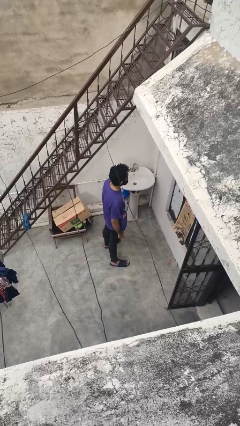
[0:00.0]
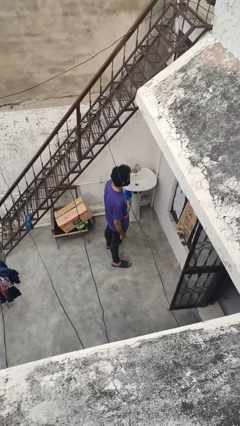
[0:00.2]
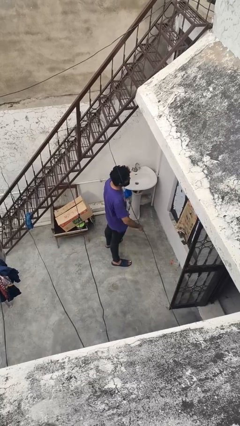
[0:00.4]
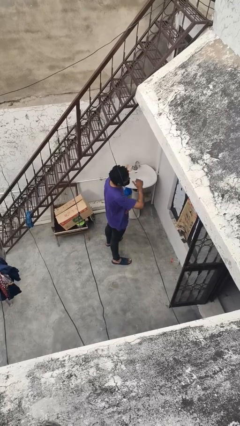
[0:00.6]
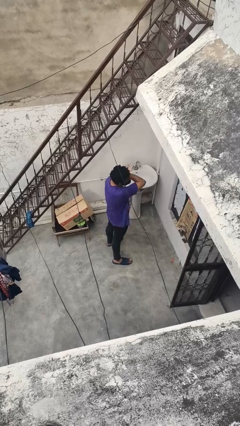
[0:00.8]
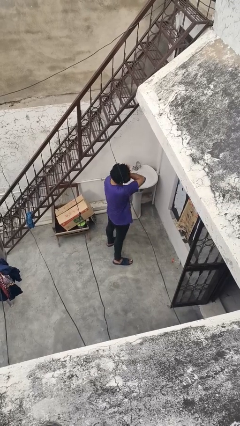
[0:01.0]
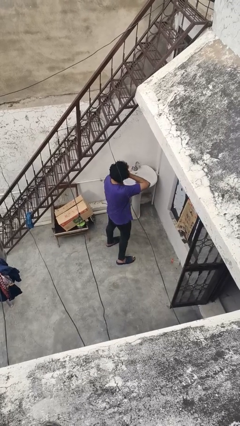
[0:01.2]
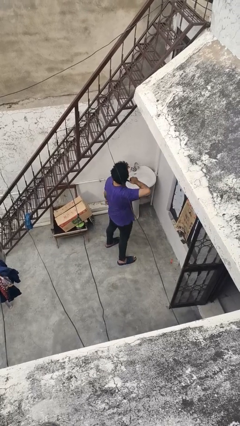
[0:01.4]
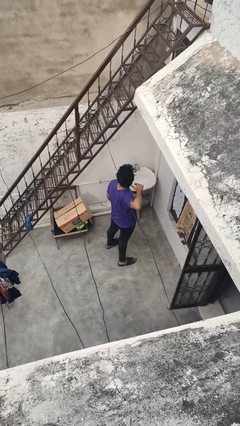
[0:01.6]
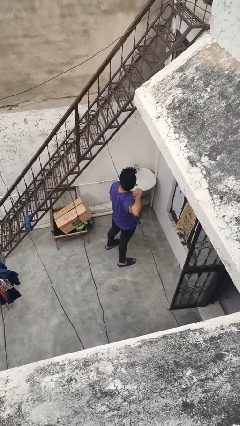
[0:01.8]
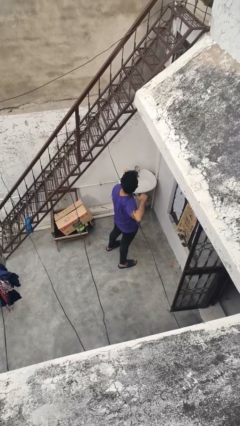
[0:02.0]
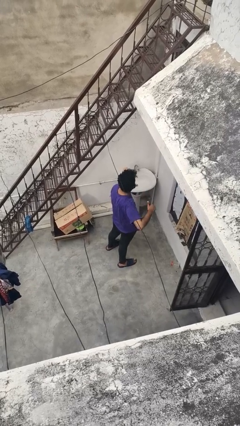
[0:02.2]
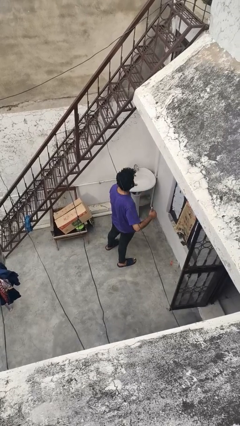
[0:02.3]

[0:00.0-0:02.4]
person gestures cut

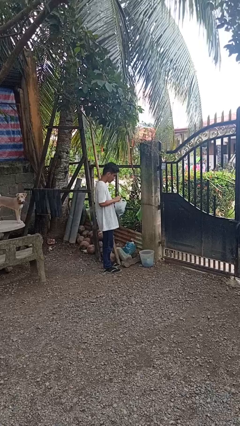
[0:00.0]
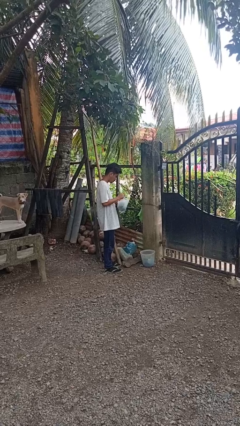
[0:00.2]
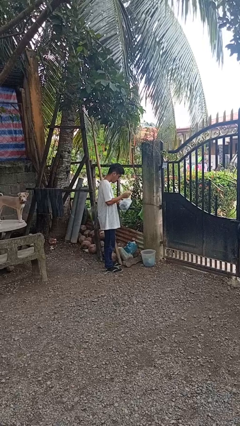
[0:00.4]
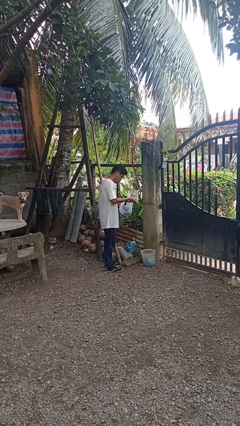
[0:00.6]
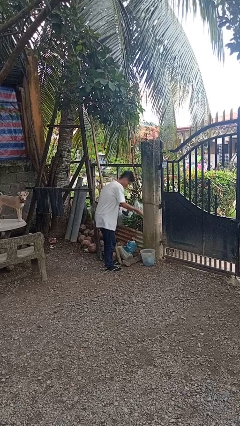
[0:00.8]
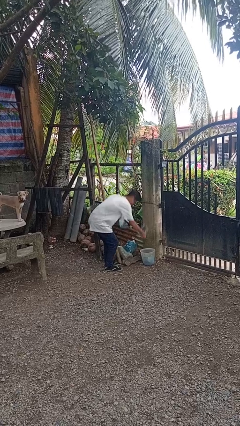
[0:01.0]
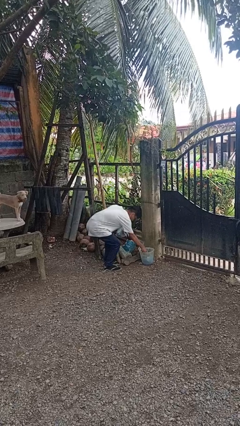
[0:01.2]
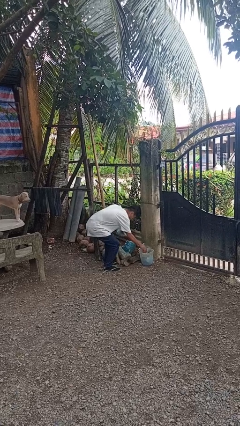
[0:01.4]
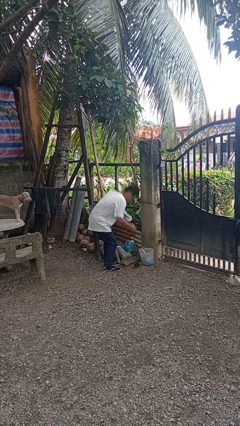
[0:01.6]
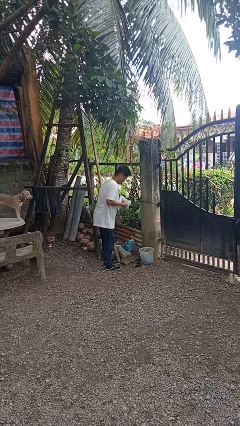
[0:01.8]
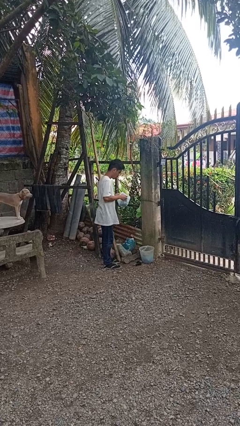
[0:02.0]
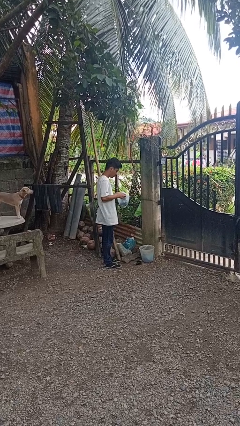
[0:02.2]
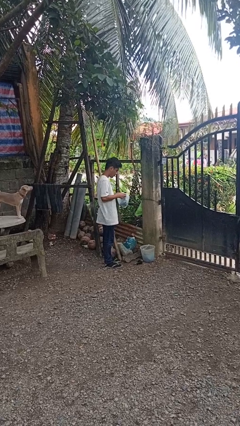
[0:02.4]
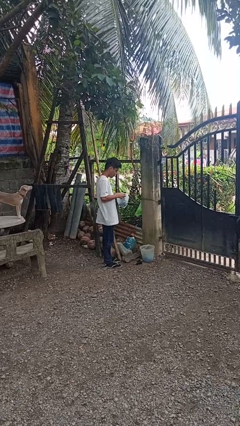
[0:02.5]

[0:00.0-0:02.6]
person discards trash

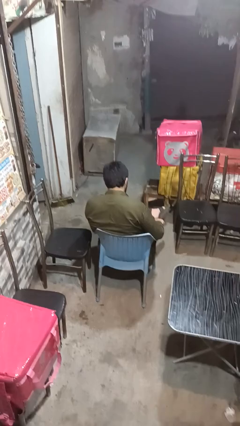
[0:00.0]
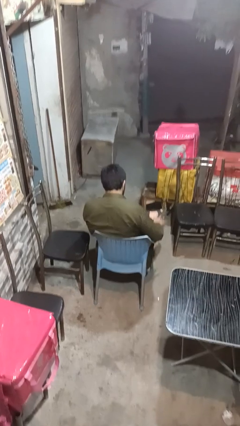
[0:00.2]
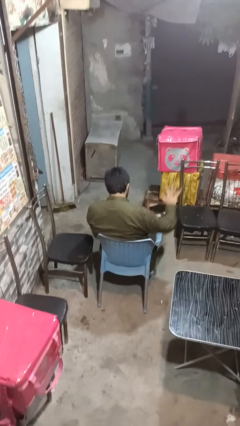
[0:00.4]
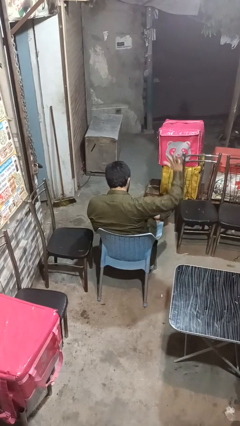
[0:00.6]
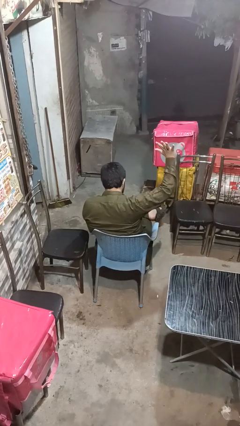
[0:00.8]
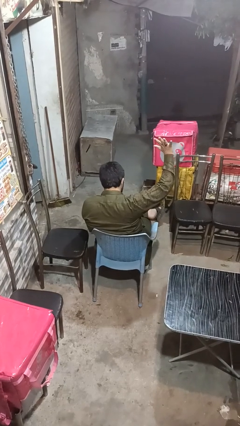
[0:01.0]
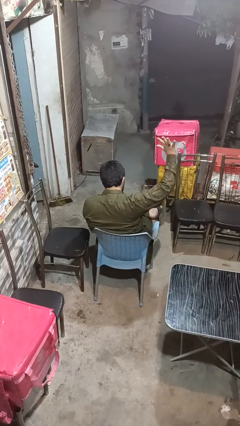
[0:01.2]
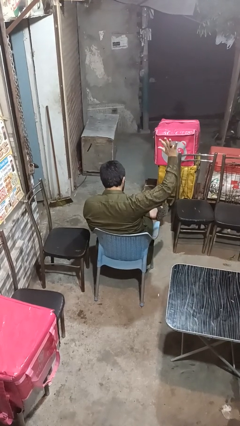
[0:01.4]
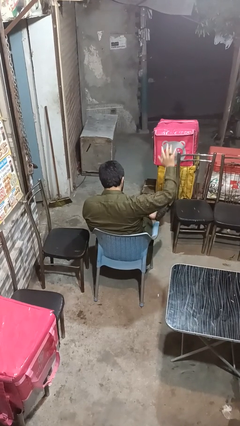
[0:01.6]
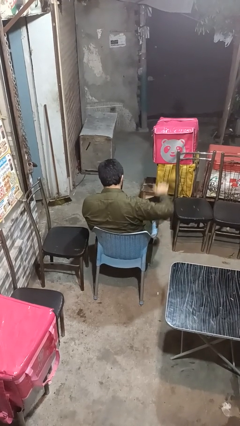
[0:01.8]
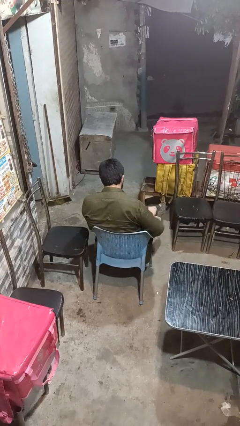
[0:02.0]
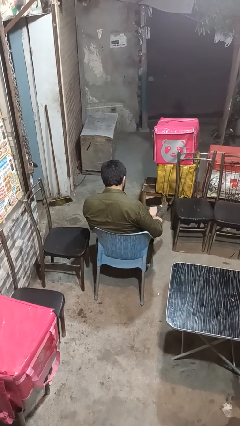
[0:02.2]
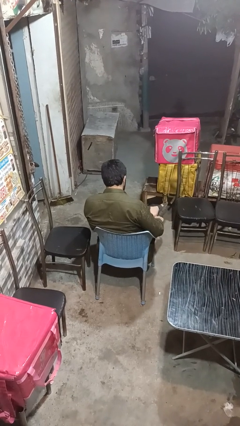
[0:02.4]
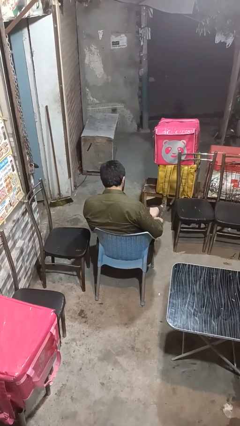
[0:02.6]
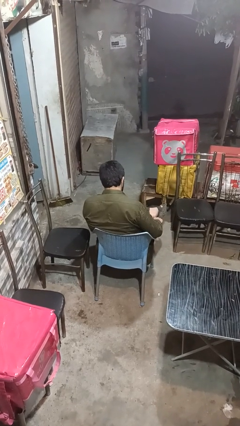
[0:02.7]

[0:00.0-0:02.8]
person gestures number five

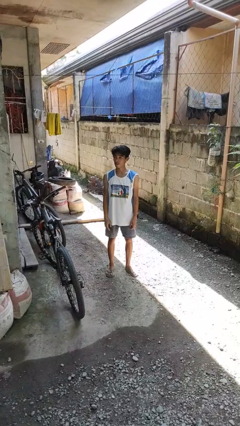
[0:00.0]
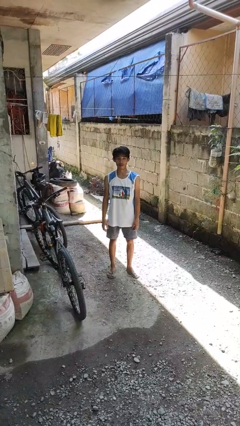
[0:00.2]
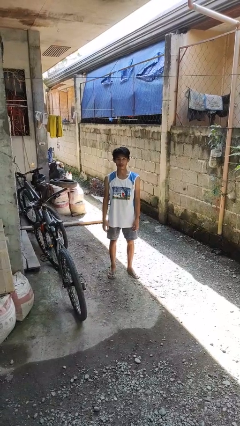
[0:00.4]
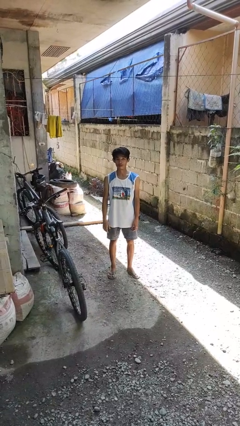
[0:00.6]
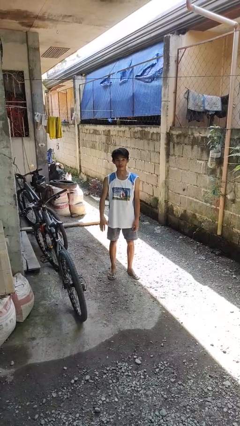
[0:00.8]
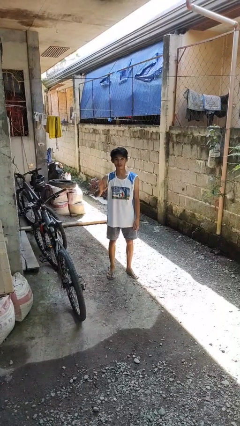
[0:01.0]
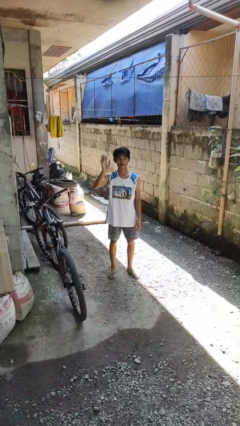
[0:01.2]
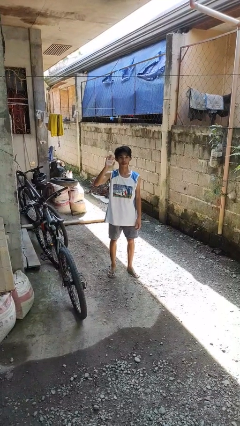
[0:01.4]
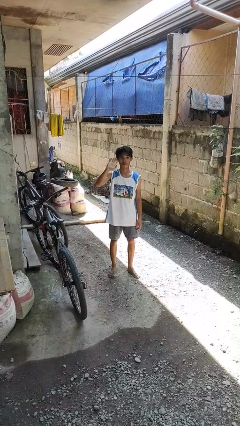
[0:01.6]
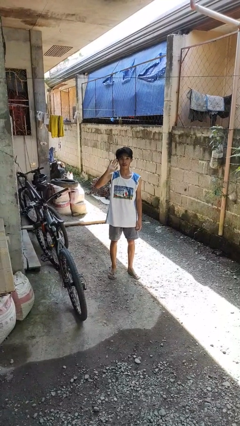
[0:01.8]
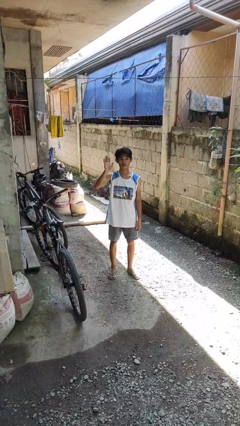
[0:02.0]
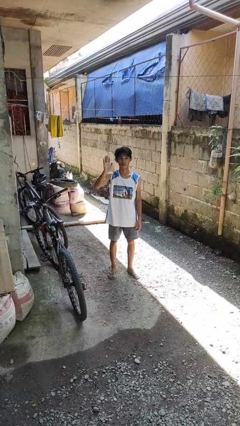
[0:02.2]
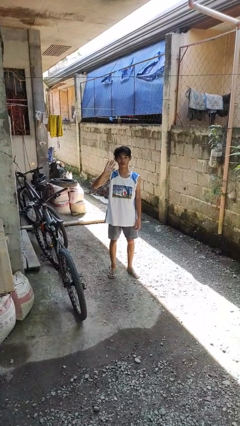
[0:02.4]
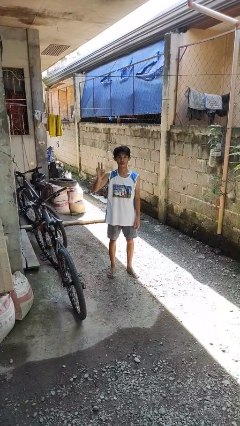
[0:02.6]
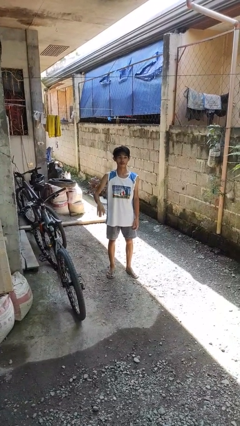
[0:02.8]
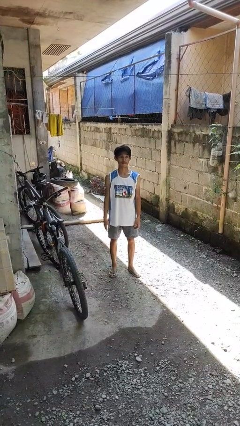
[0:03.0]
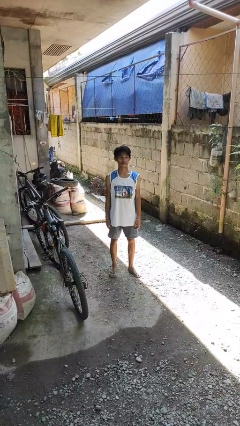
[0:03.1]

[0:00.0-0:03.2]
person waves at person

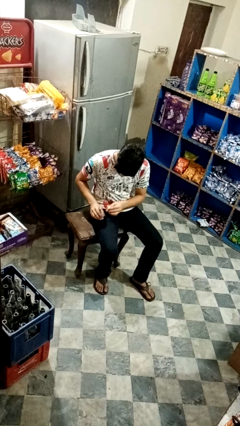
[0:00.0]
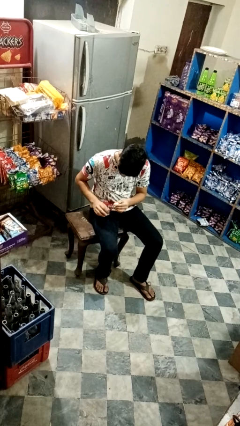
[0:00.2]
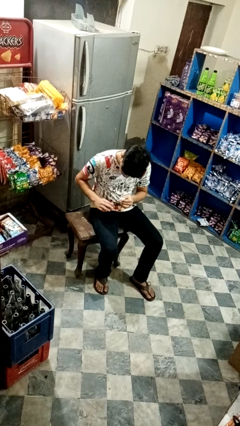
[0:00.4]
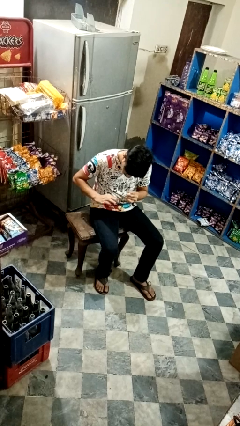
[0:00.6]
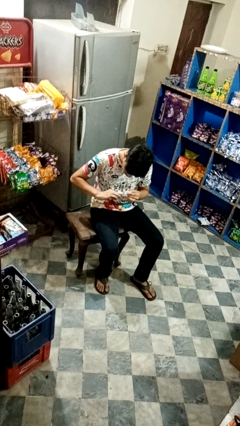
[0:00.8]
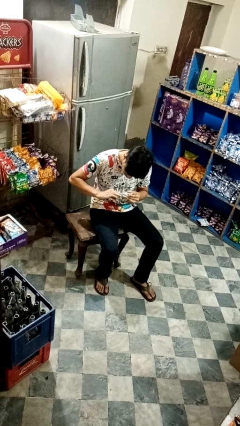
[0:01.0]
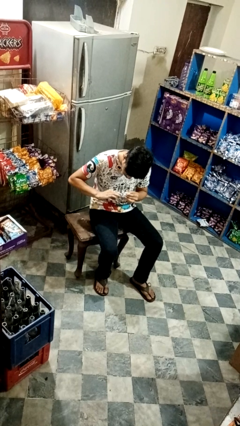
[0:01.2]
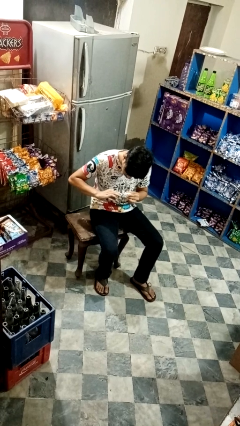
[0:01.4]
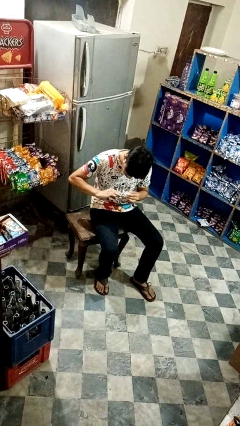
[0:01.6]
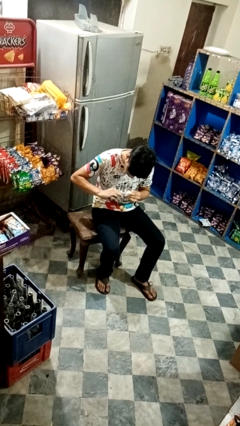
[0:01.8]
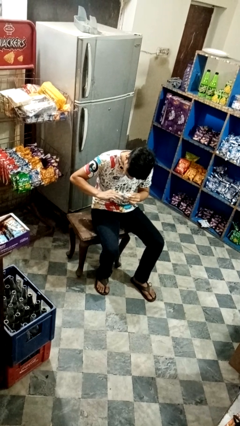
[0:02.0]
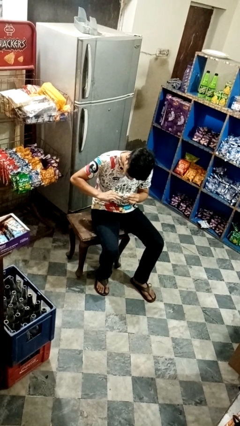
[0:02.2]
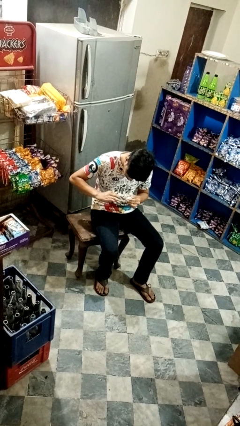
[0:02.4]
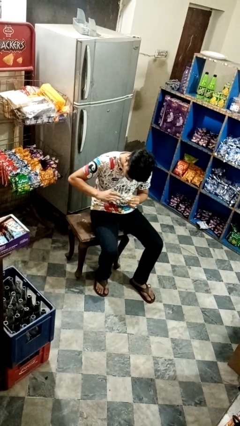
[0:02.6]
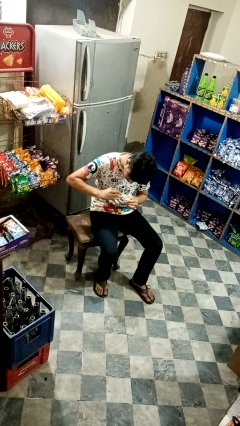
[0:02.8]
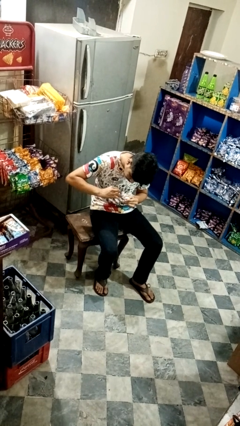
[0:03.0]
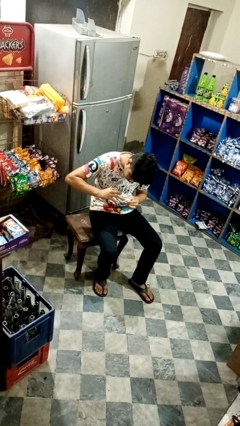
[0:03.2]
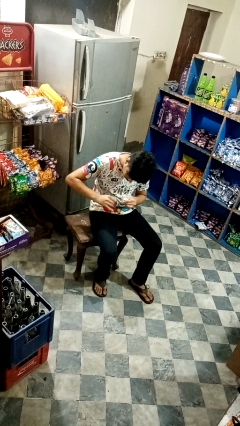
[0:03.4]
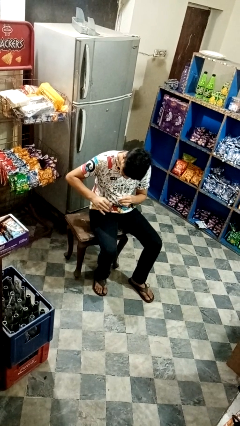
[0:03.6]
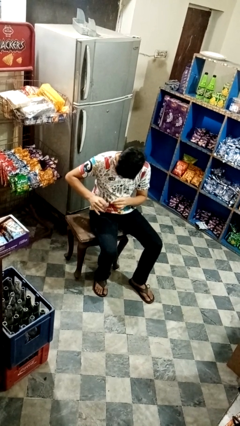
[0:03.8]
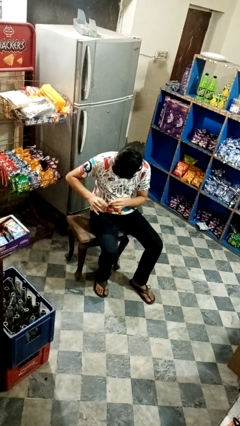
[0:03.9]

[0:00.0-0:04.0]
person paints fingernails

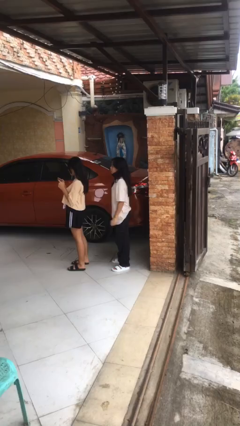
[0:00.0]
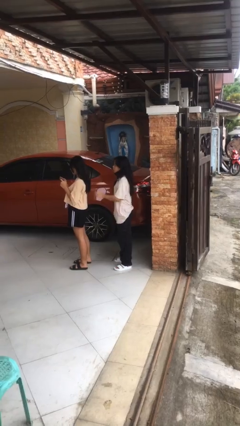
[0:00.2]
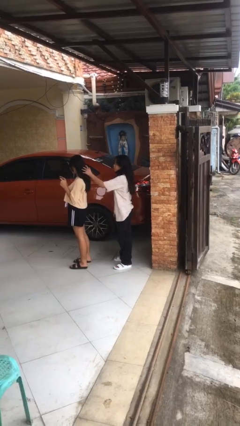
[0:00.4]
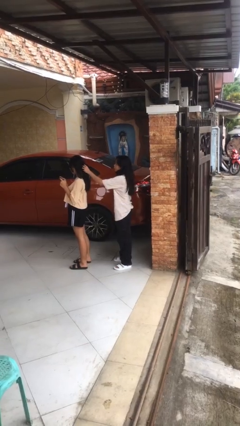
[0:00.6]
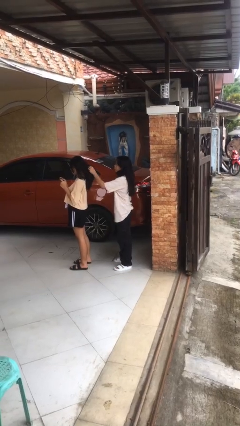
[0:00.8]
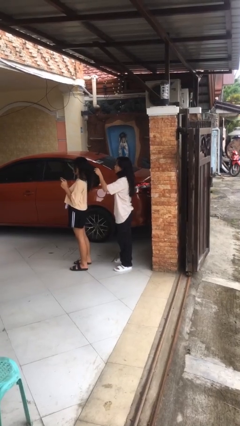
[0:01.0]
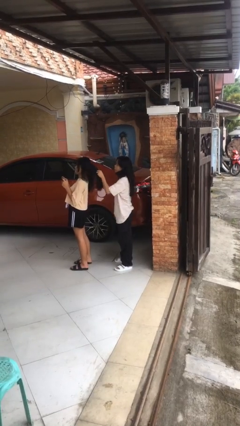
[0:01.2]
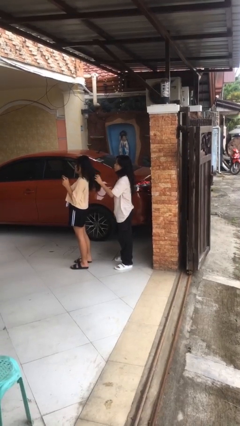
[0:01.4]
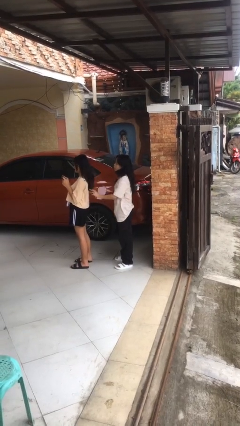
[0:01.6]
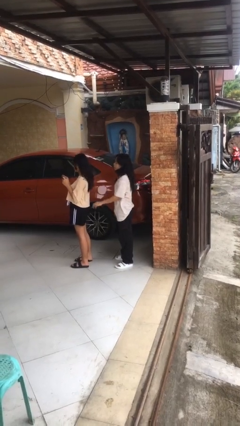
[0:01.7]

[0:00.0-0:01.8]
person grabs person by hair

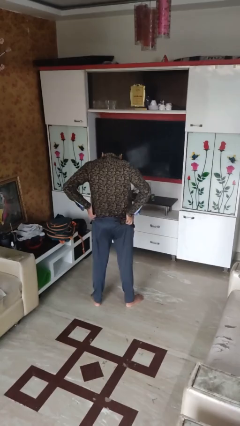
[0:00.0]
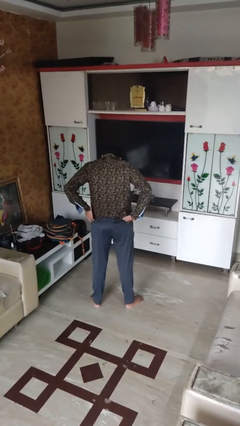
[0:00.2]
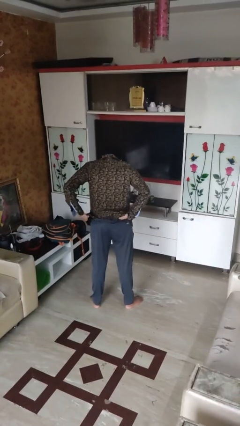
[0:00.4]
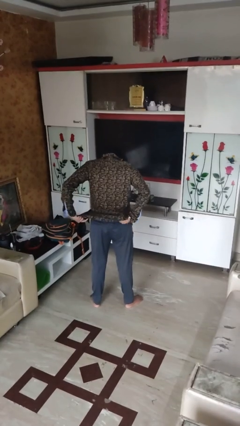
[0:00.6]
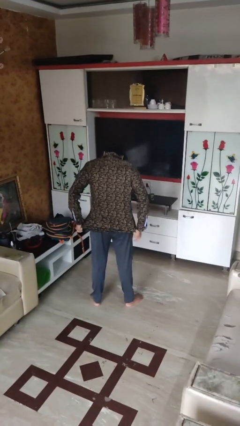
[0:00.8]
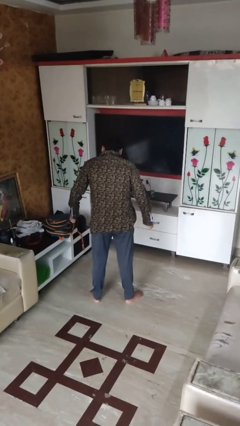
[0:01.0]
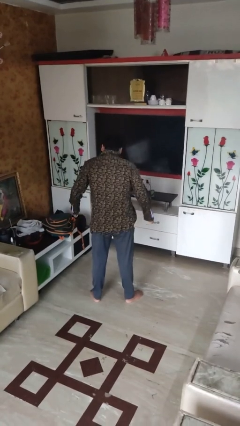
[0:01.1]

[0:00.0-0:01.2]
person untucks shirt
